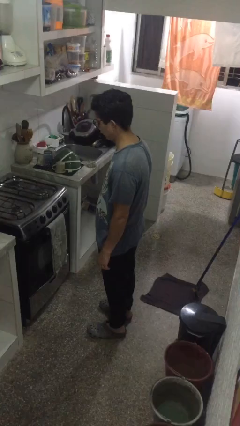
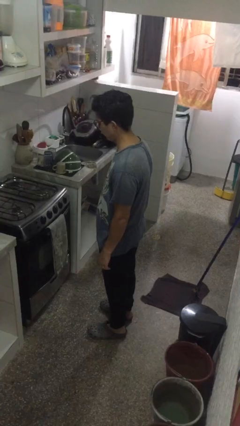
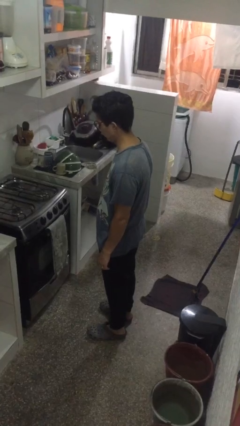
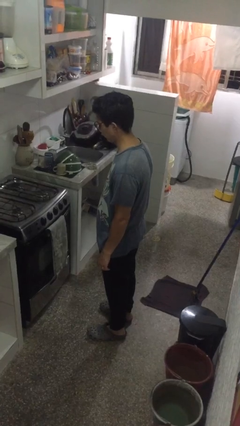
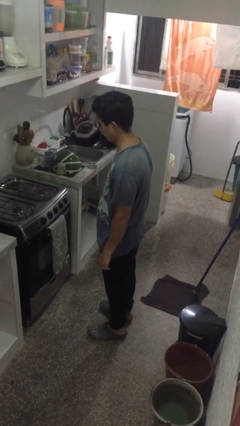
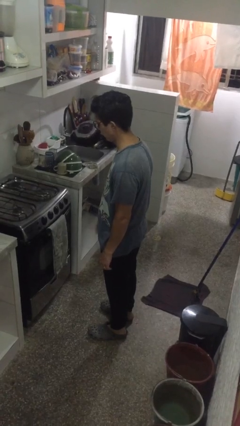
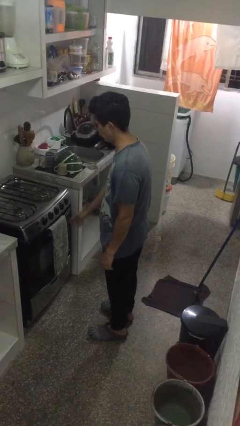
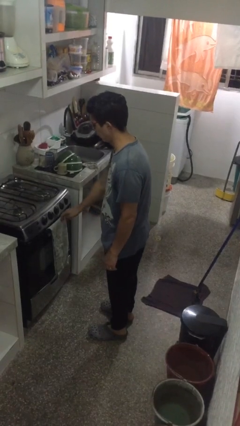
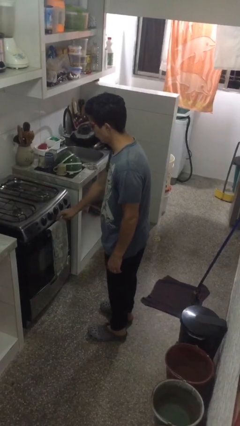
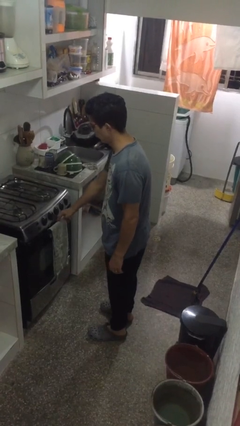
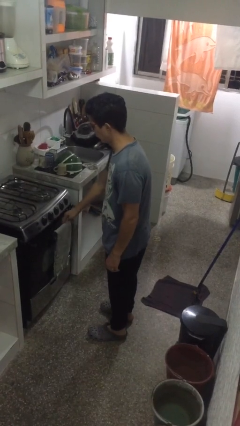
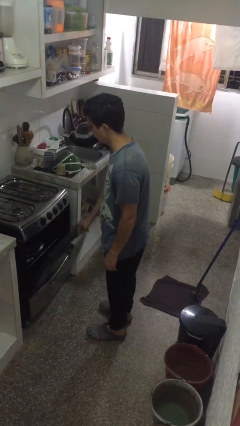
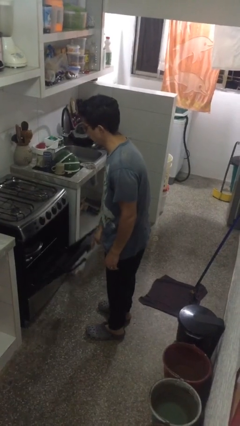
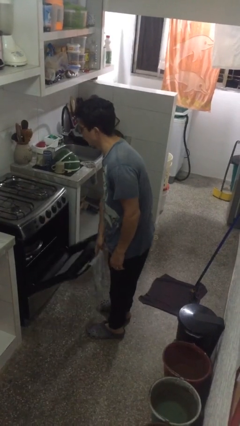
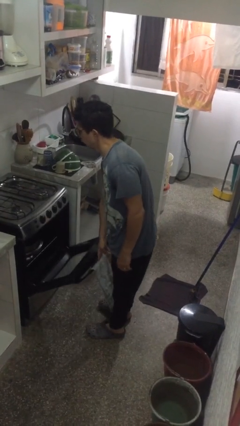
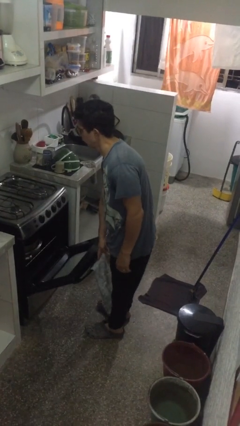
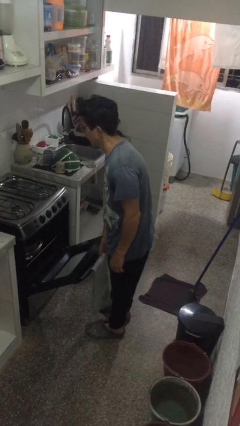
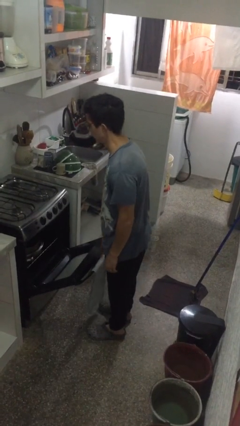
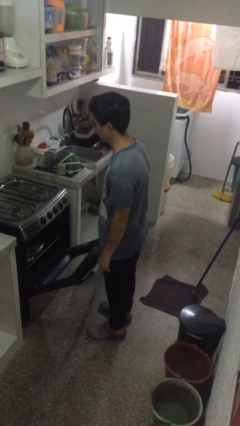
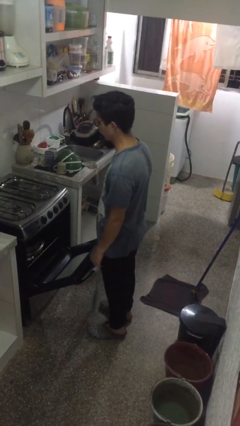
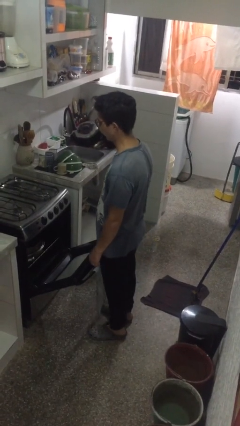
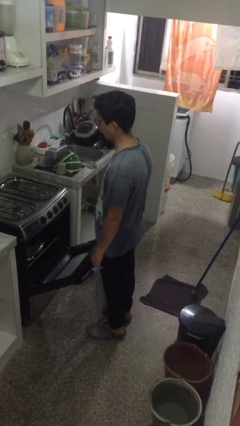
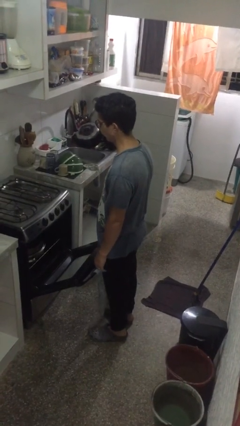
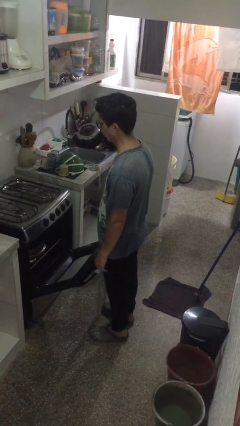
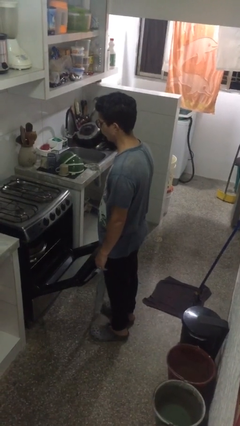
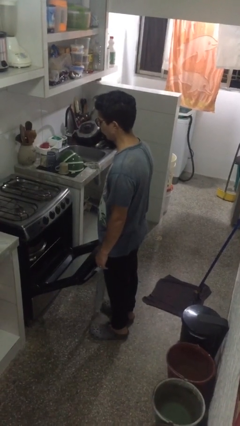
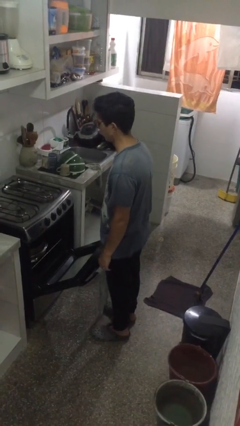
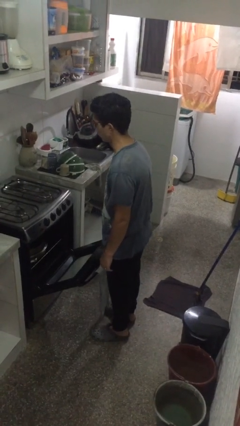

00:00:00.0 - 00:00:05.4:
person opens oven door

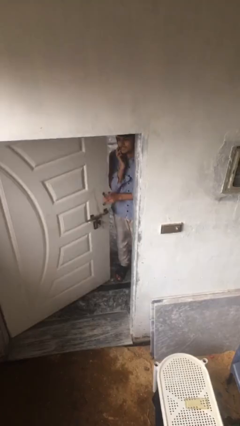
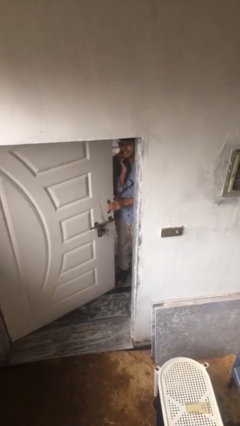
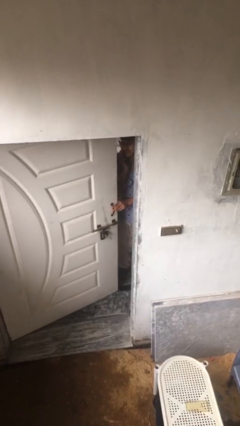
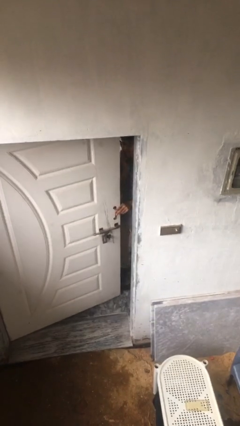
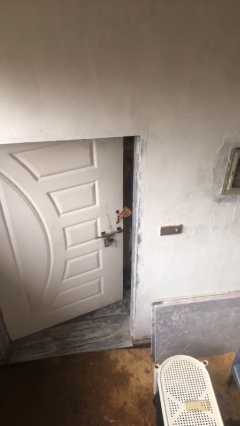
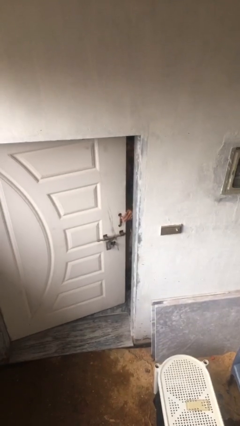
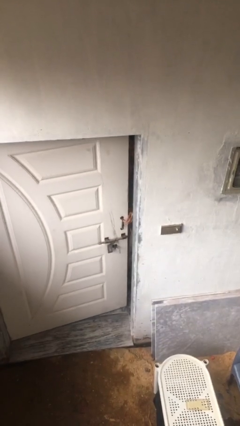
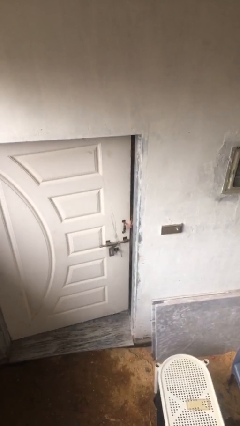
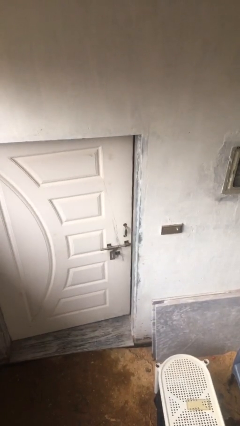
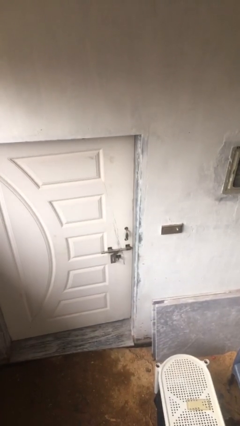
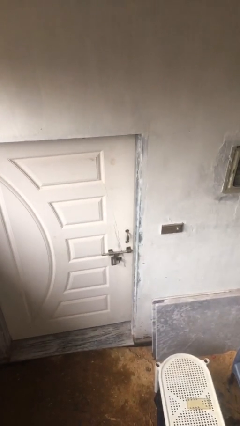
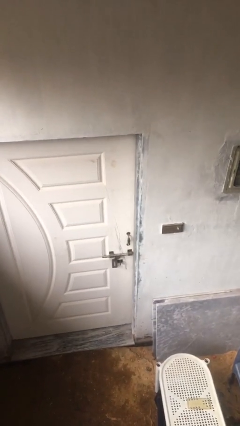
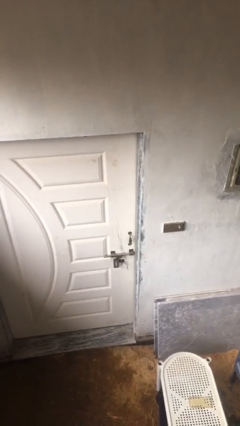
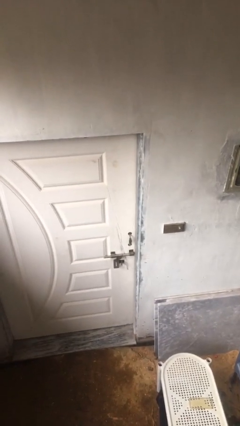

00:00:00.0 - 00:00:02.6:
person closes facility door

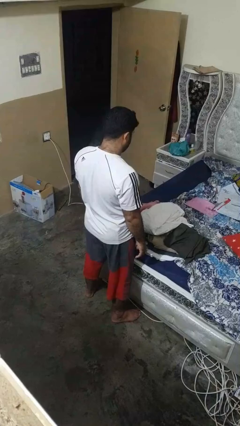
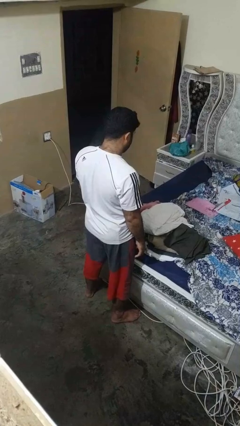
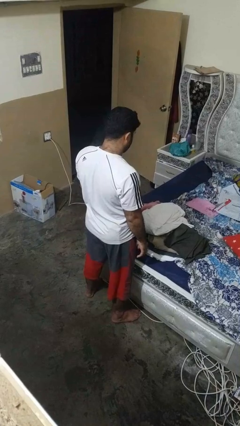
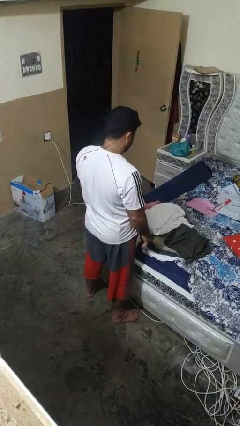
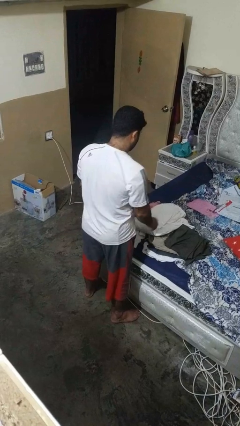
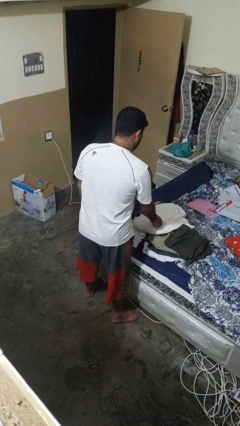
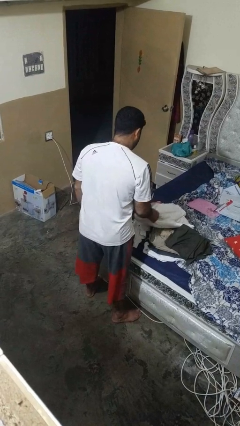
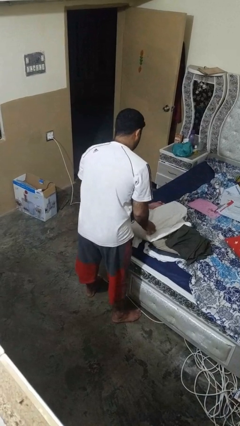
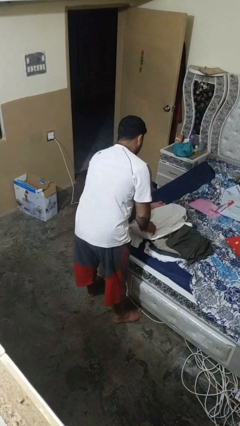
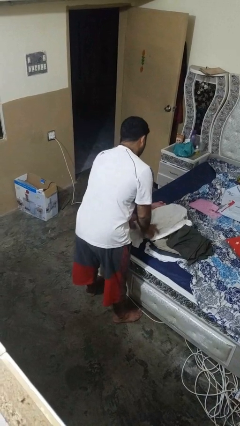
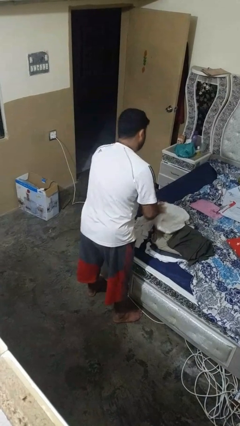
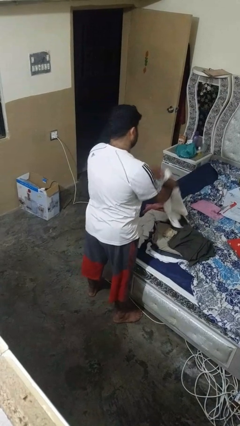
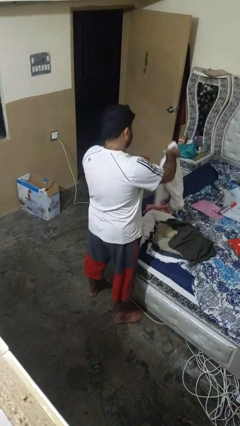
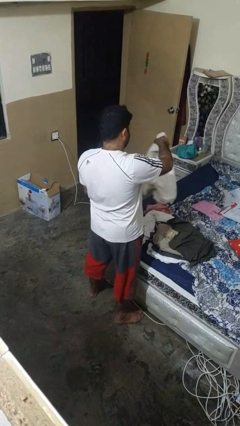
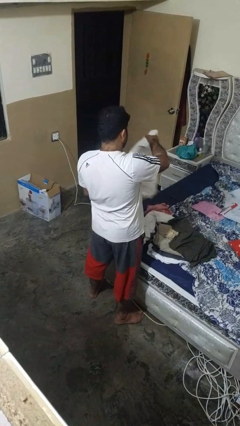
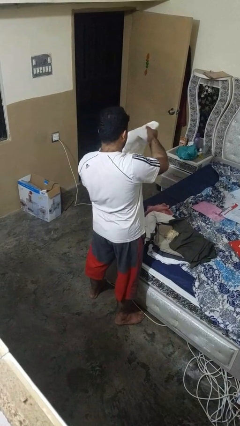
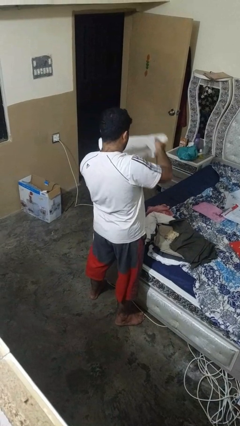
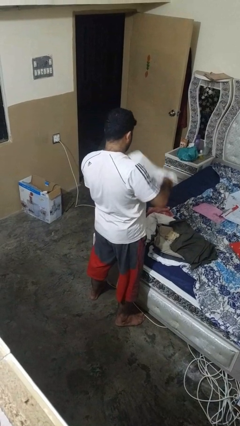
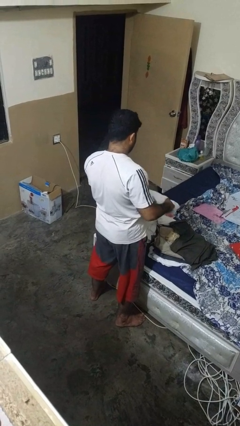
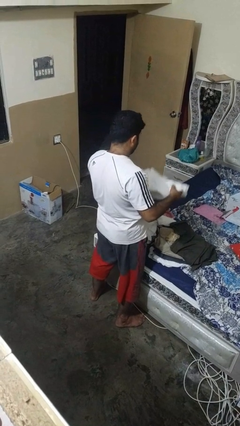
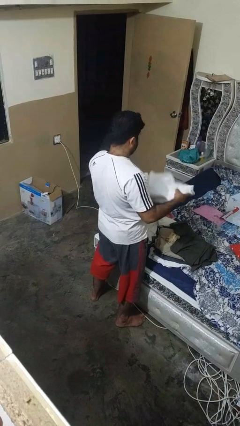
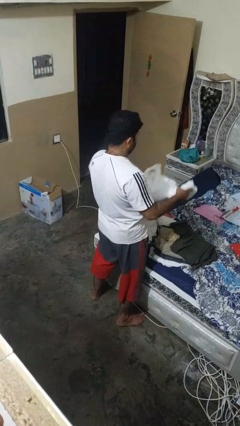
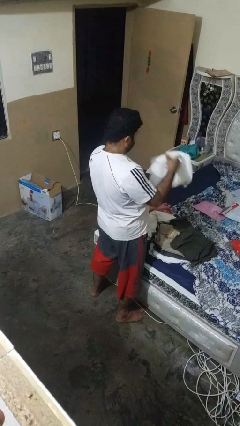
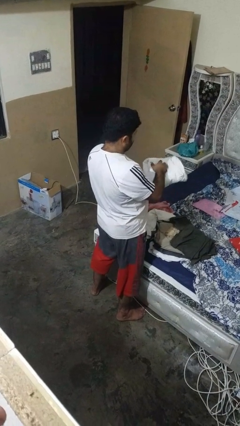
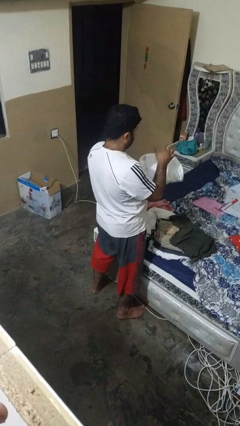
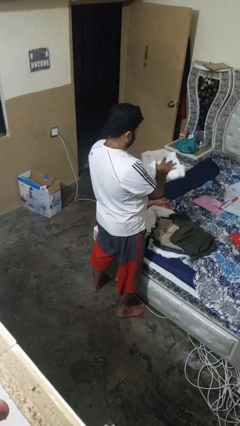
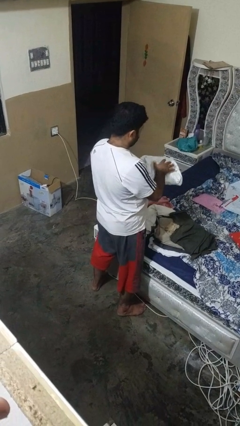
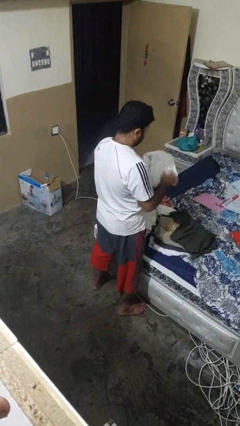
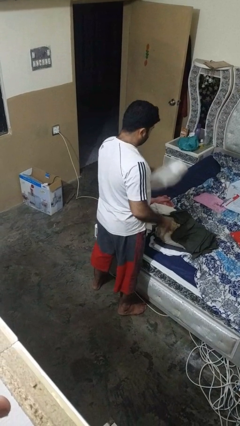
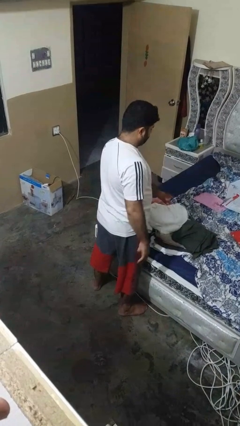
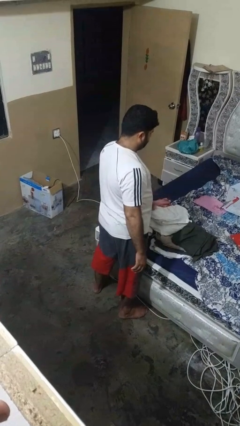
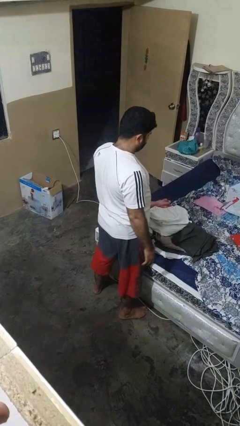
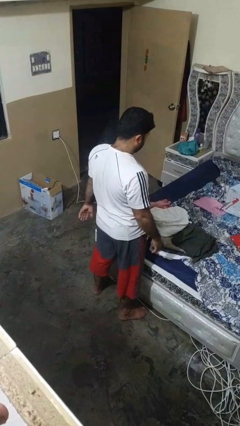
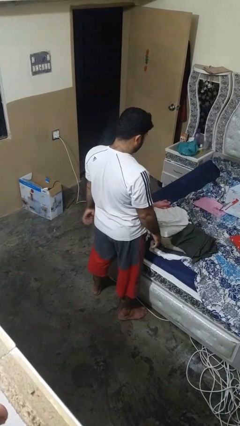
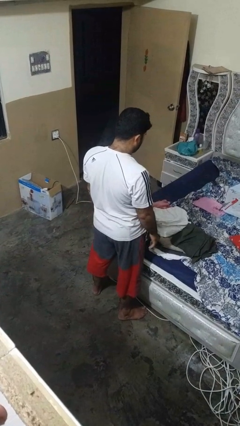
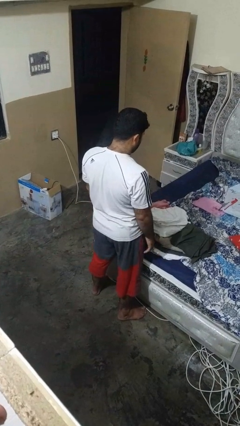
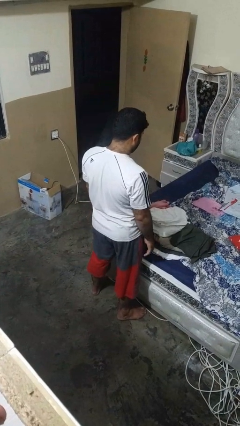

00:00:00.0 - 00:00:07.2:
person folds shirt

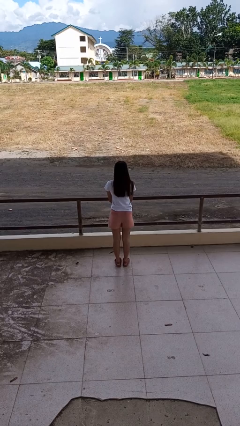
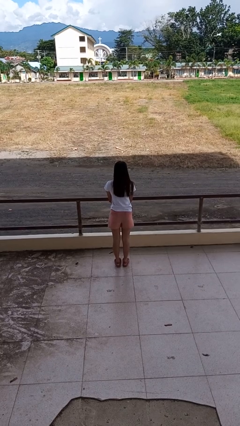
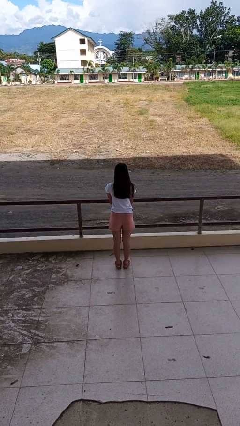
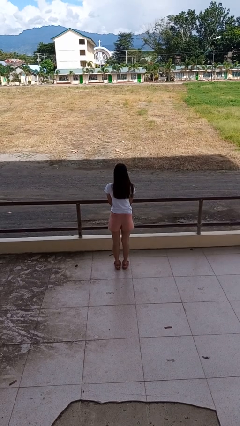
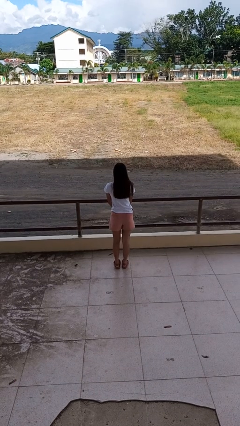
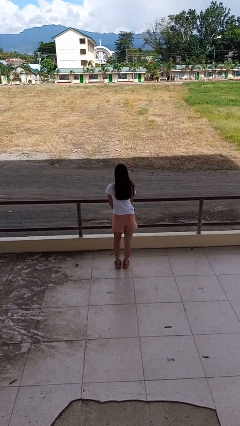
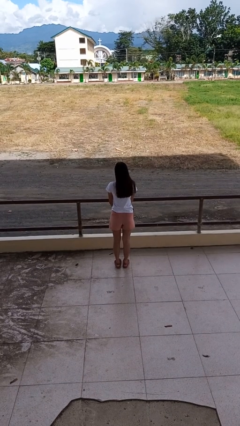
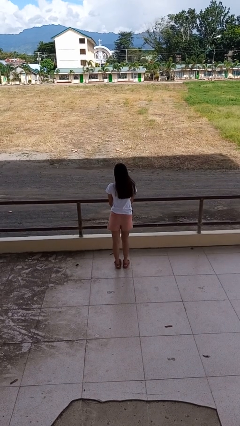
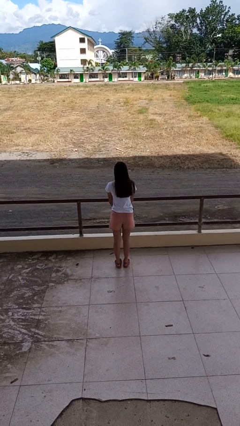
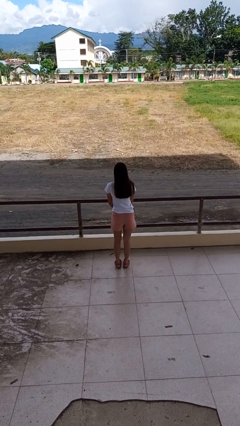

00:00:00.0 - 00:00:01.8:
person wiggles hips

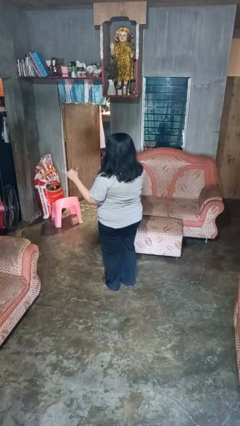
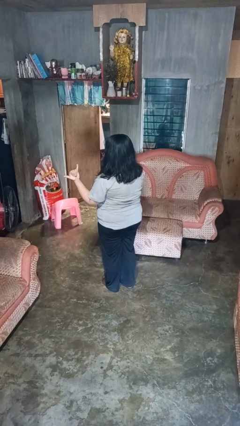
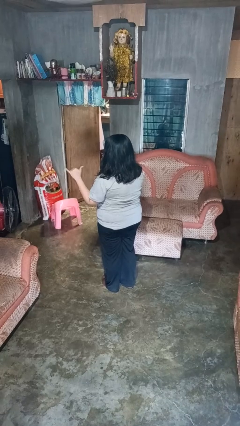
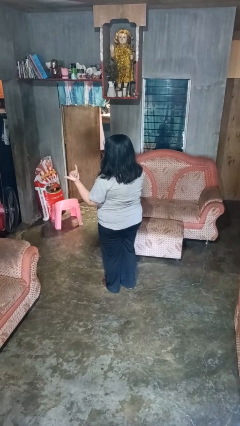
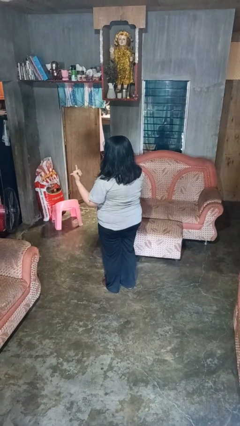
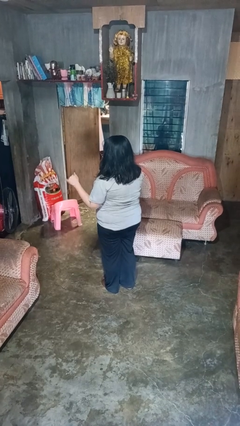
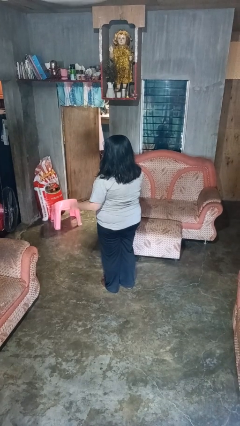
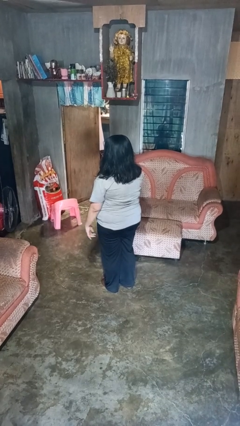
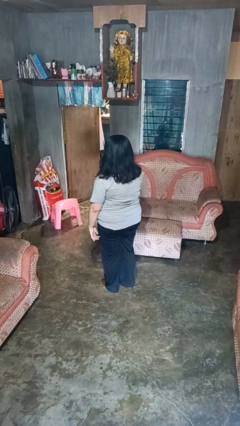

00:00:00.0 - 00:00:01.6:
person gestures hang loose
